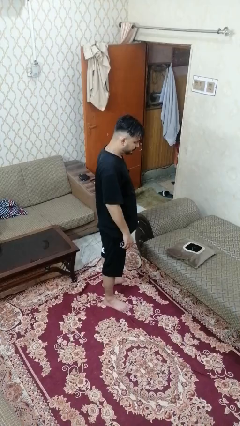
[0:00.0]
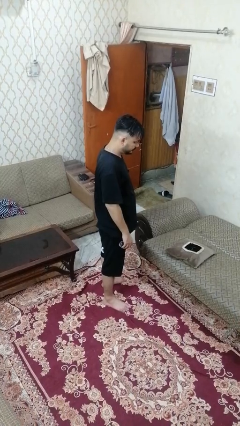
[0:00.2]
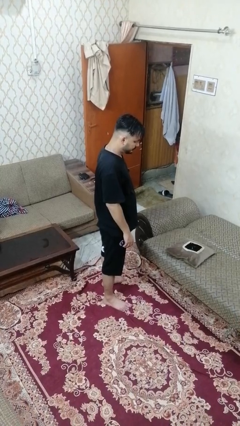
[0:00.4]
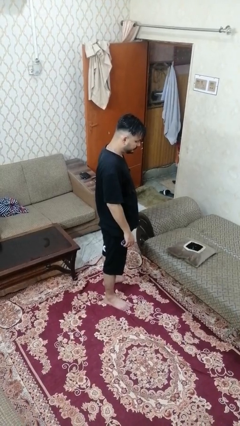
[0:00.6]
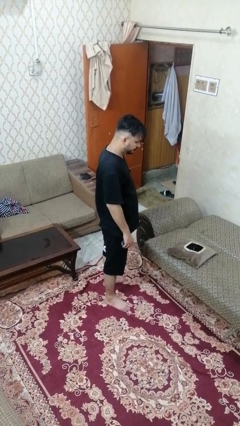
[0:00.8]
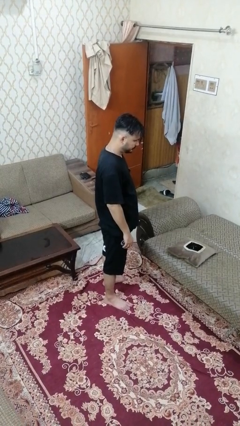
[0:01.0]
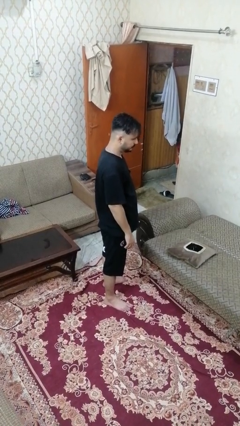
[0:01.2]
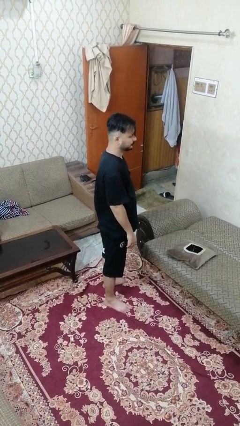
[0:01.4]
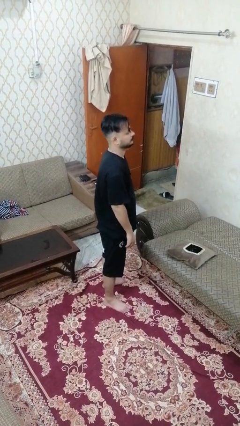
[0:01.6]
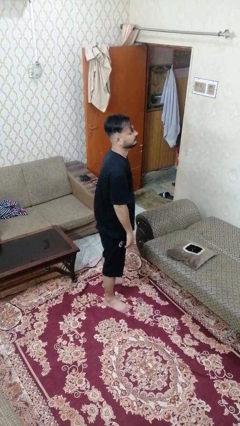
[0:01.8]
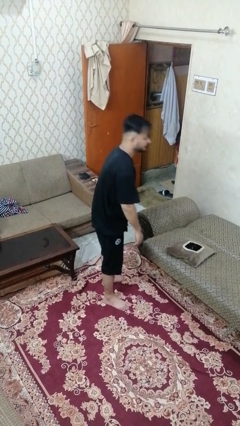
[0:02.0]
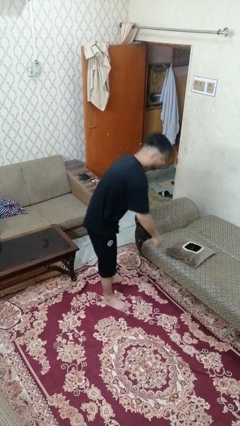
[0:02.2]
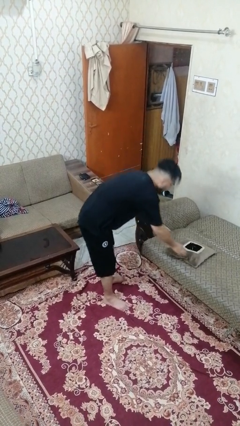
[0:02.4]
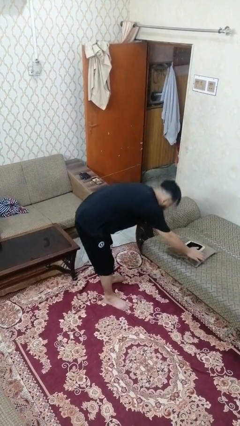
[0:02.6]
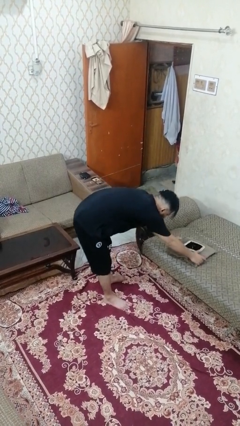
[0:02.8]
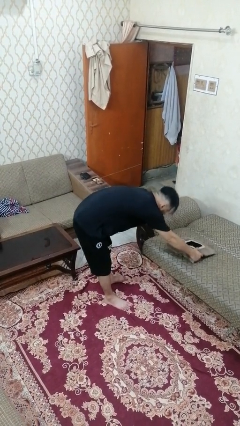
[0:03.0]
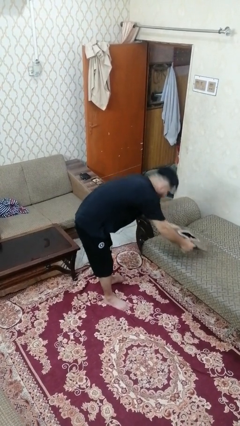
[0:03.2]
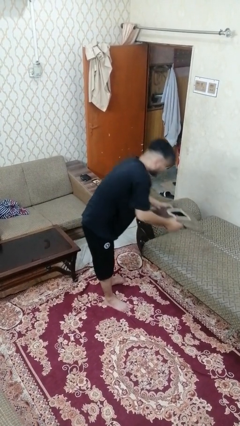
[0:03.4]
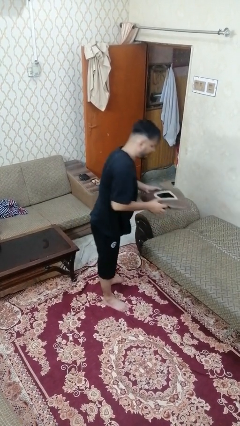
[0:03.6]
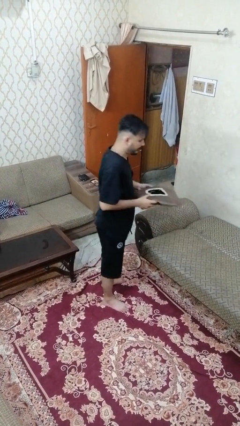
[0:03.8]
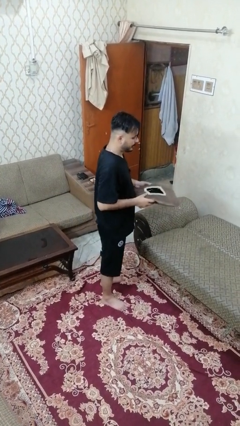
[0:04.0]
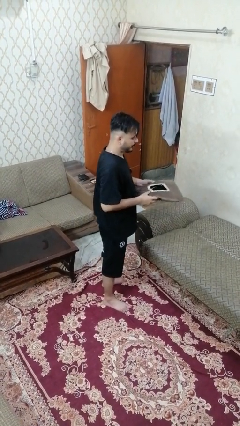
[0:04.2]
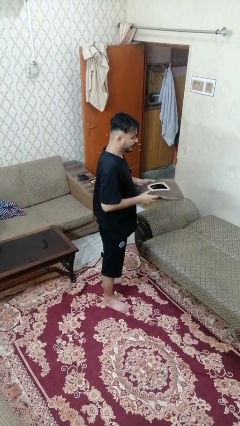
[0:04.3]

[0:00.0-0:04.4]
person picks up object from couch

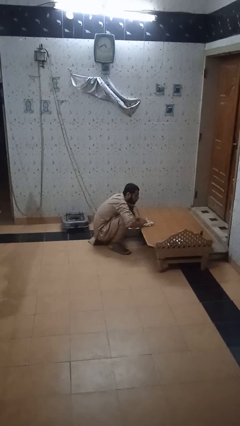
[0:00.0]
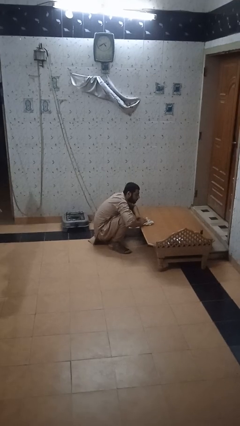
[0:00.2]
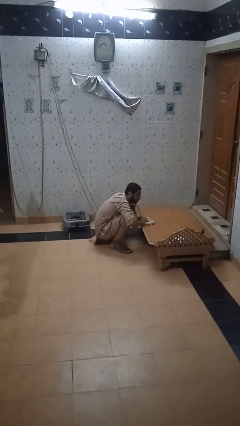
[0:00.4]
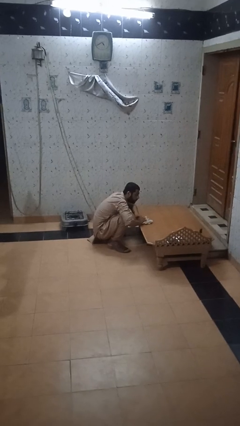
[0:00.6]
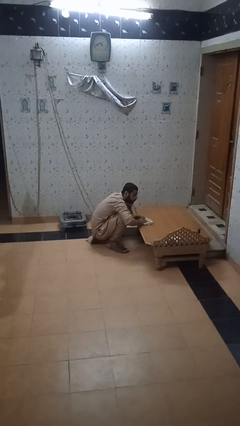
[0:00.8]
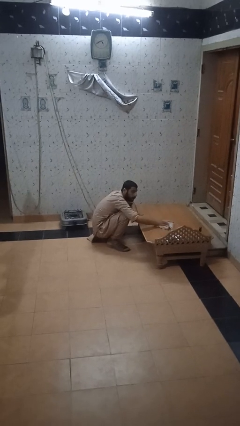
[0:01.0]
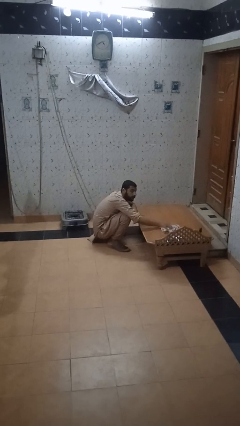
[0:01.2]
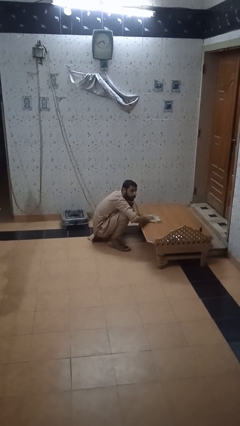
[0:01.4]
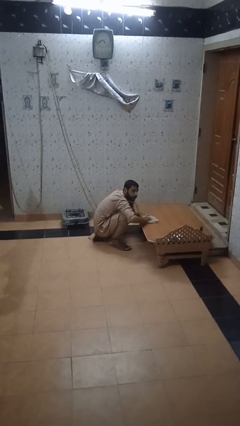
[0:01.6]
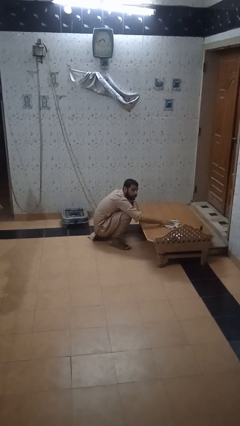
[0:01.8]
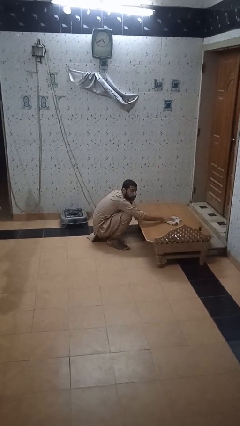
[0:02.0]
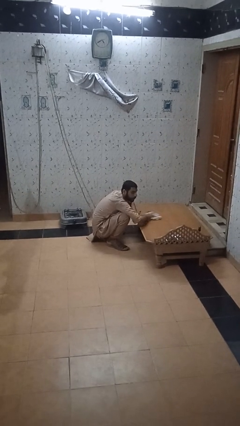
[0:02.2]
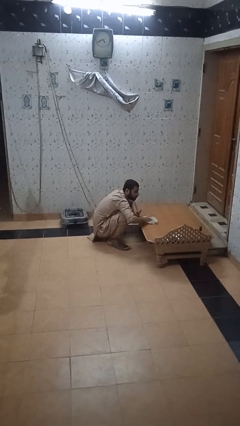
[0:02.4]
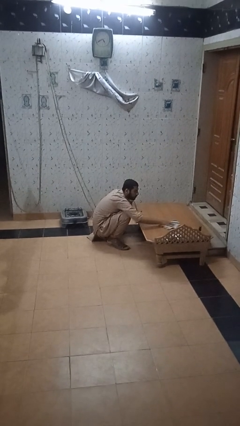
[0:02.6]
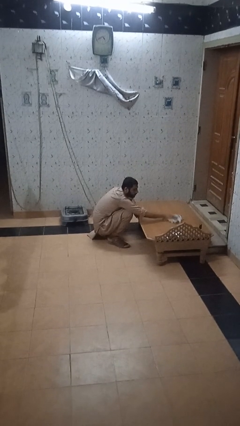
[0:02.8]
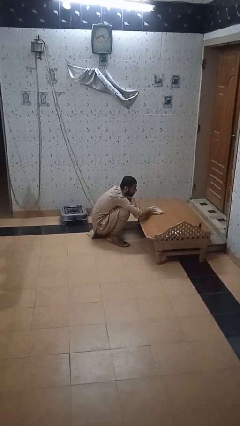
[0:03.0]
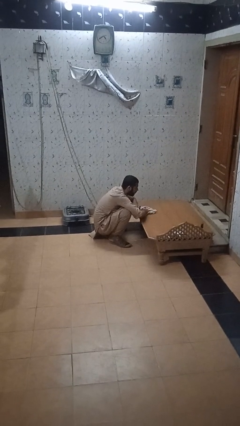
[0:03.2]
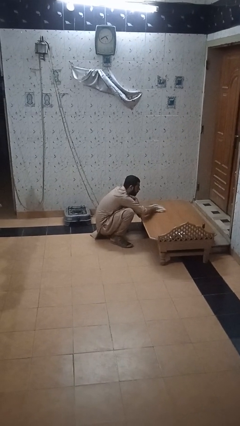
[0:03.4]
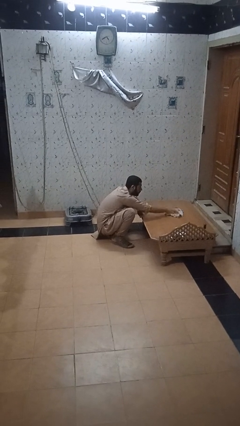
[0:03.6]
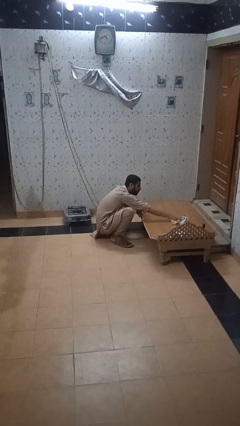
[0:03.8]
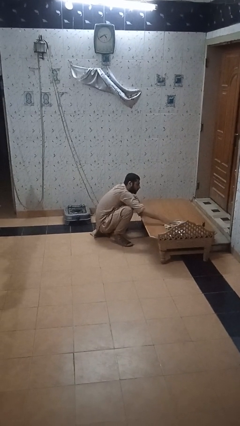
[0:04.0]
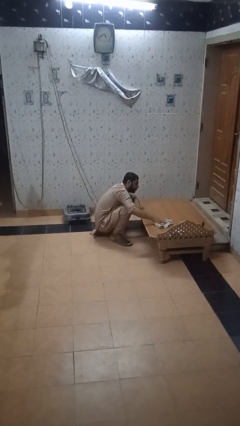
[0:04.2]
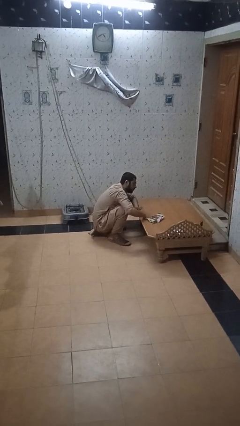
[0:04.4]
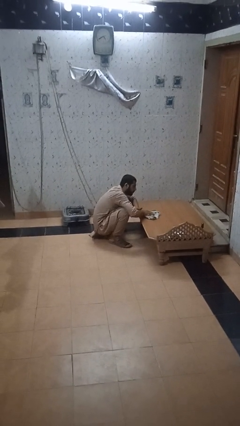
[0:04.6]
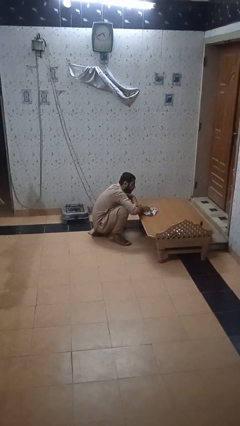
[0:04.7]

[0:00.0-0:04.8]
person cleans table with rag

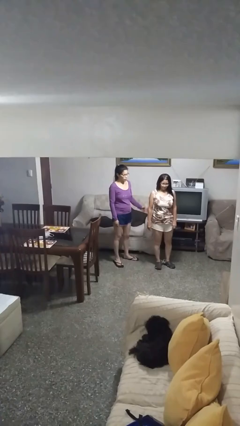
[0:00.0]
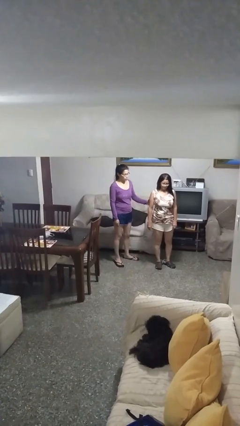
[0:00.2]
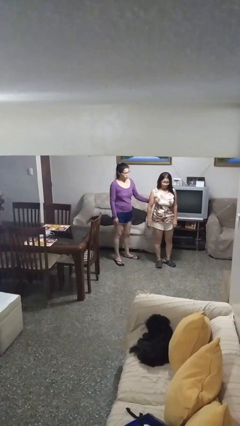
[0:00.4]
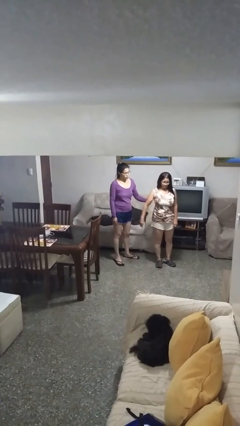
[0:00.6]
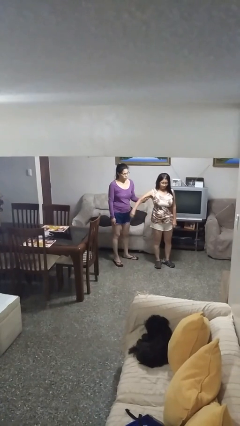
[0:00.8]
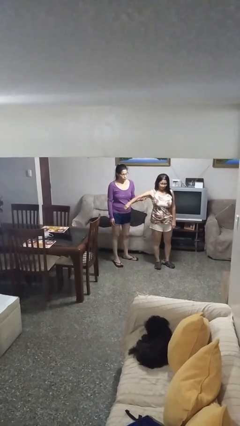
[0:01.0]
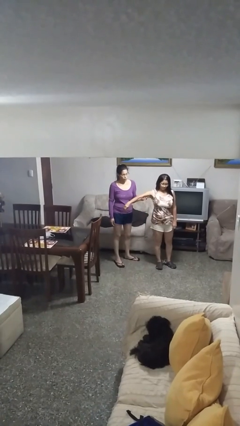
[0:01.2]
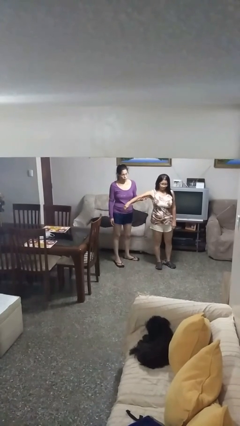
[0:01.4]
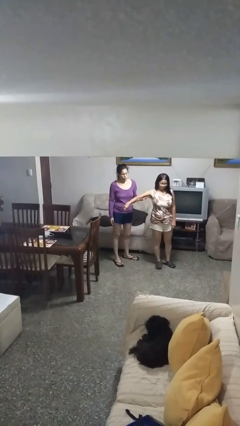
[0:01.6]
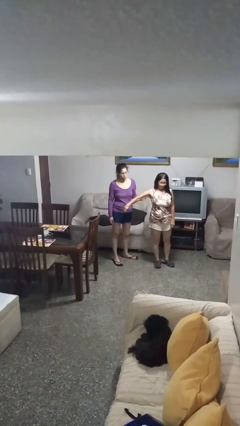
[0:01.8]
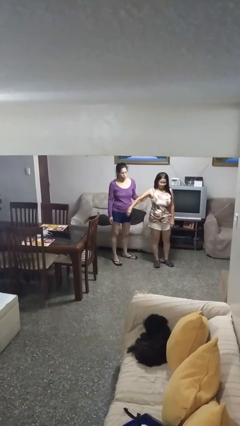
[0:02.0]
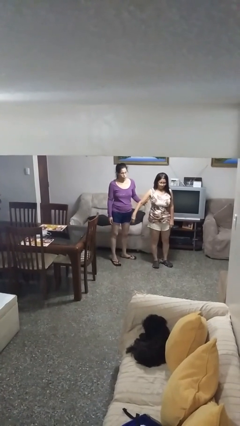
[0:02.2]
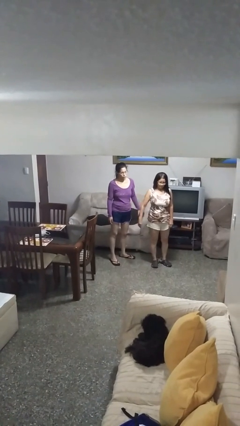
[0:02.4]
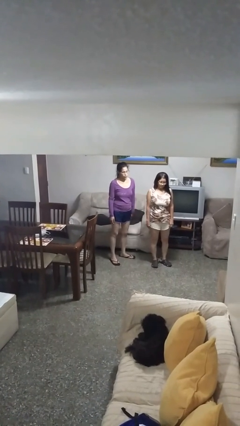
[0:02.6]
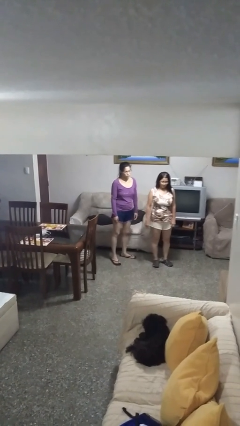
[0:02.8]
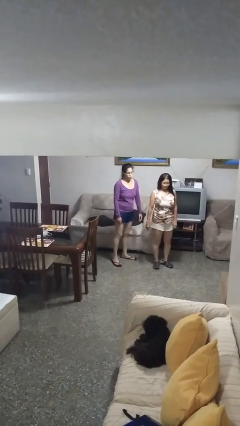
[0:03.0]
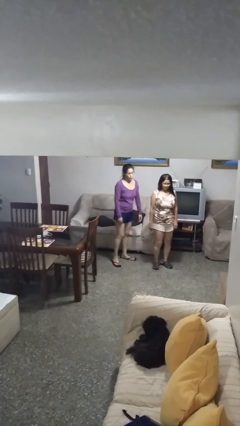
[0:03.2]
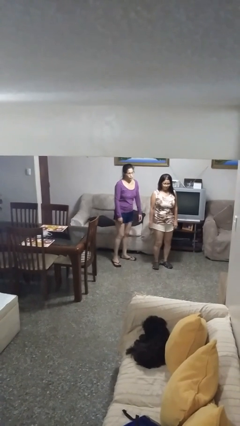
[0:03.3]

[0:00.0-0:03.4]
person grabs person by bicep

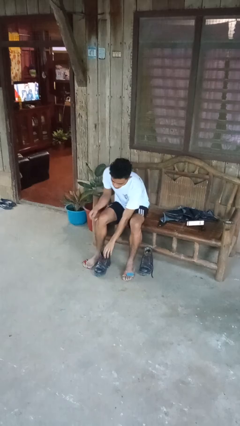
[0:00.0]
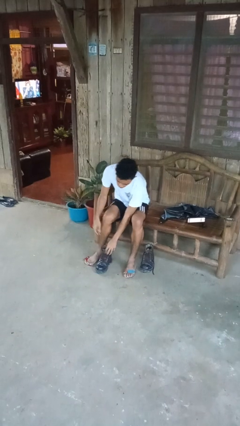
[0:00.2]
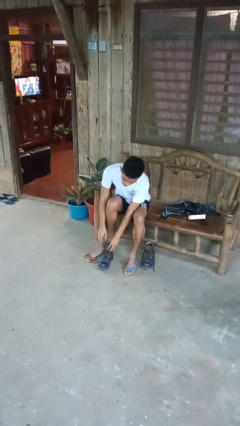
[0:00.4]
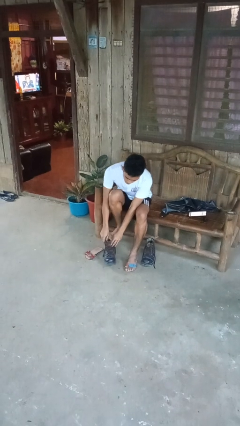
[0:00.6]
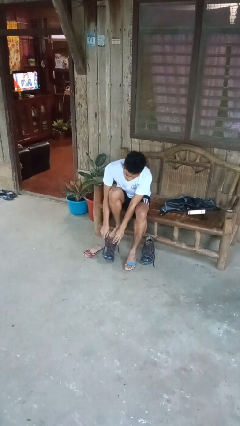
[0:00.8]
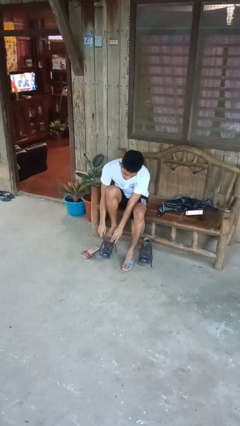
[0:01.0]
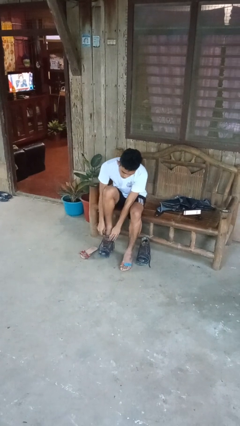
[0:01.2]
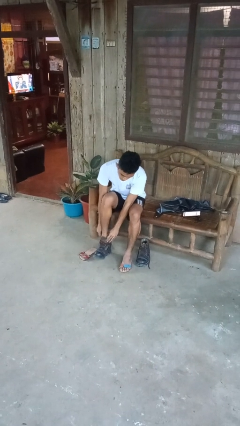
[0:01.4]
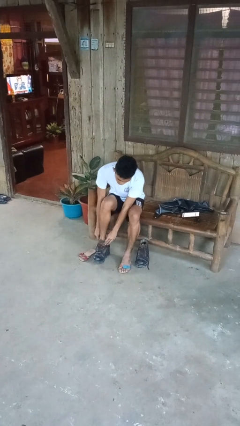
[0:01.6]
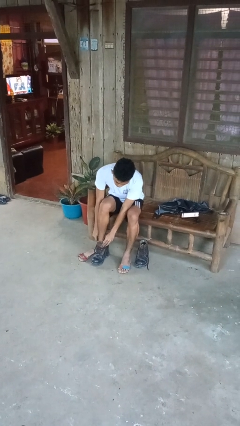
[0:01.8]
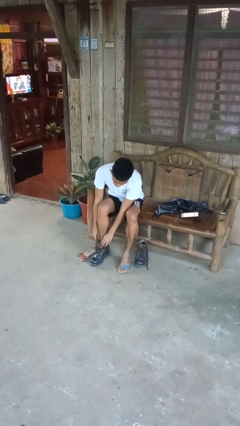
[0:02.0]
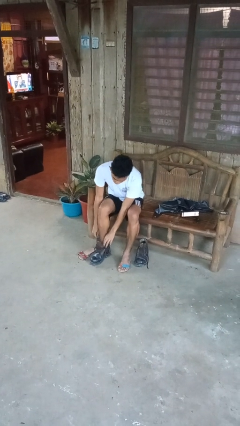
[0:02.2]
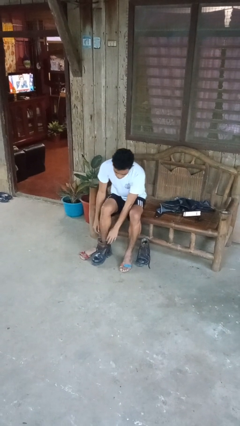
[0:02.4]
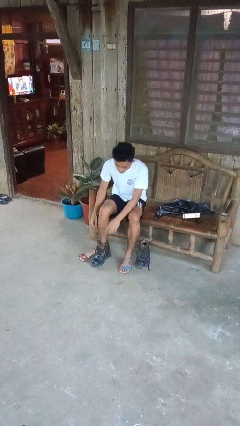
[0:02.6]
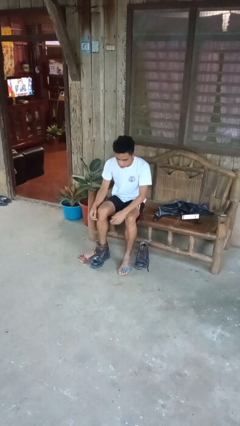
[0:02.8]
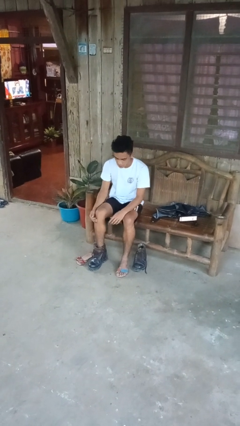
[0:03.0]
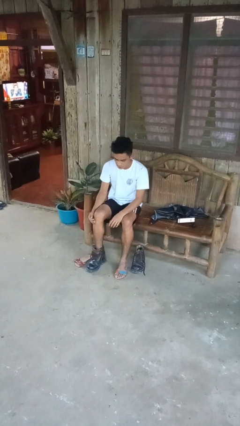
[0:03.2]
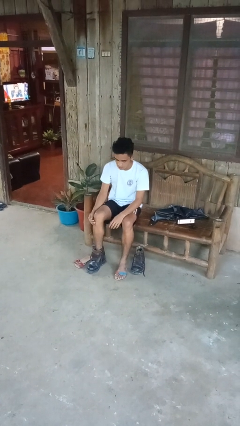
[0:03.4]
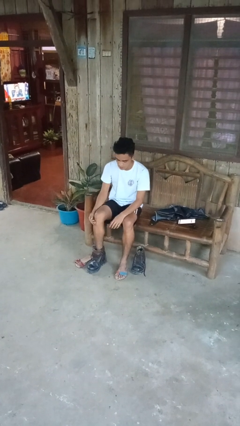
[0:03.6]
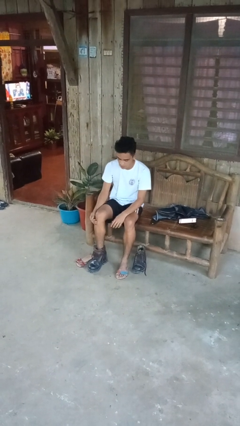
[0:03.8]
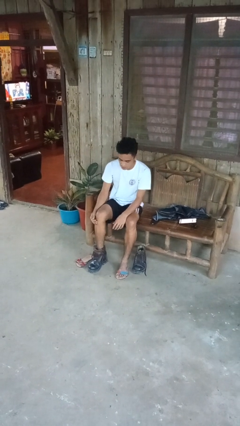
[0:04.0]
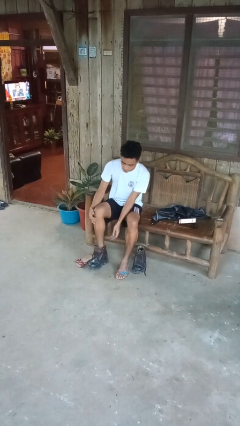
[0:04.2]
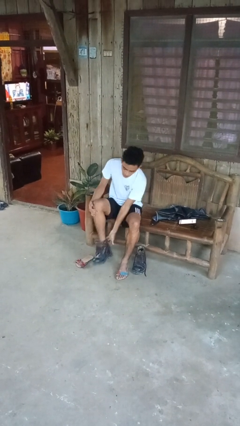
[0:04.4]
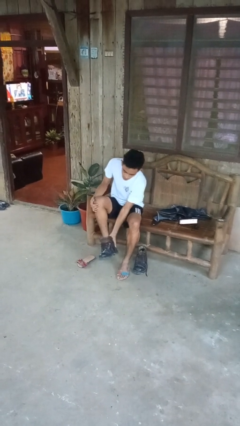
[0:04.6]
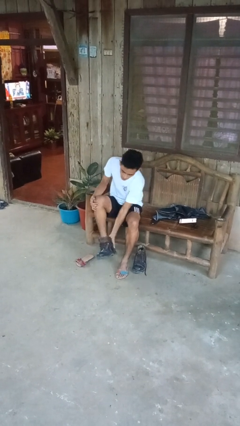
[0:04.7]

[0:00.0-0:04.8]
person puts on boots

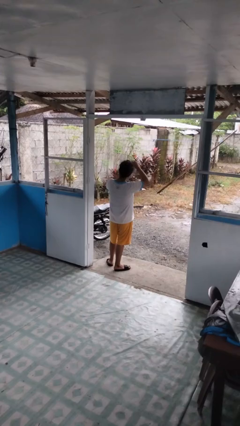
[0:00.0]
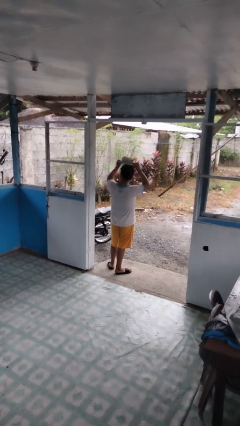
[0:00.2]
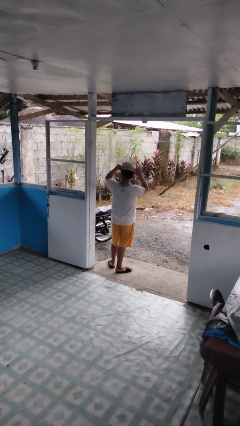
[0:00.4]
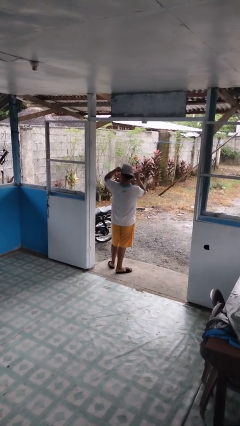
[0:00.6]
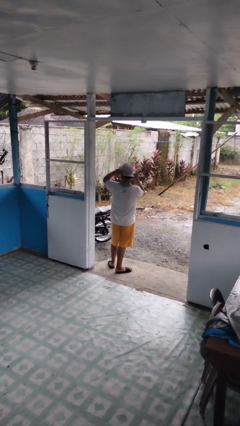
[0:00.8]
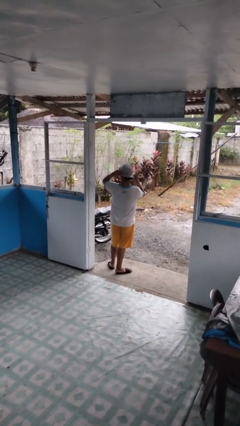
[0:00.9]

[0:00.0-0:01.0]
person puts on hat
